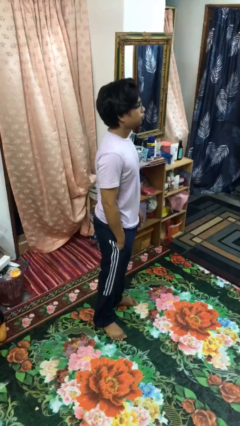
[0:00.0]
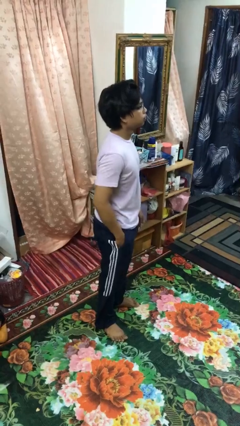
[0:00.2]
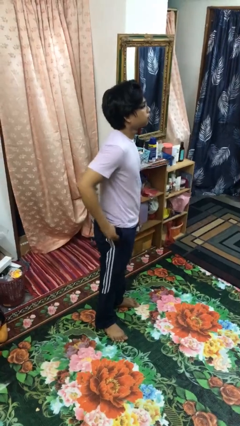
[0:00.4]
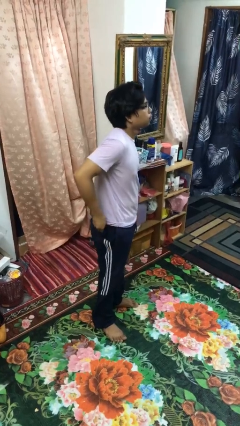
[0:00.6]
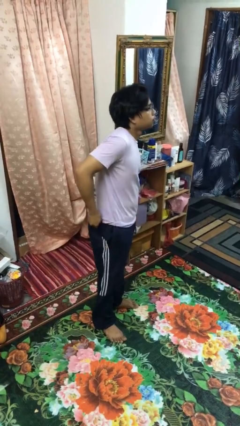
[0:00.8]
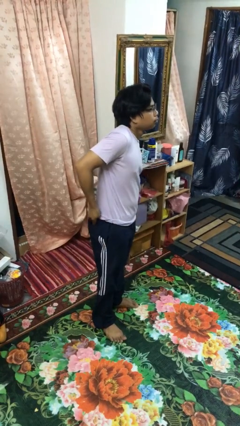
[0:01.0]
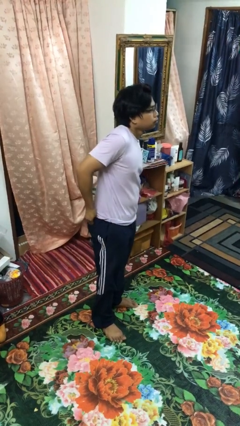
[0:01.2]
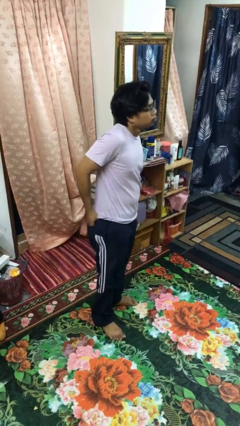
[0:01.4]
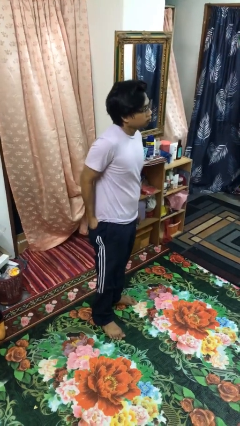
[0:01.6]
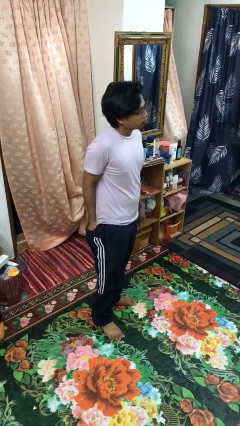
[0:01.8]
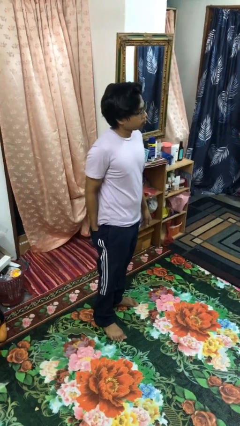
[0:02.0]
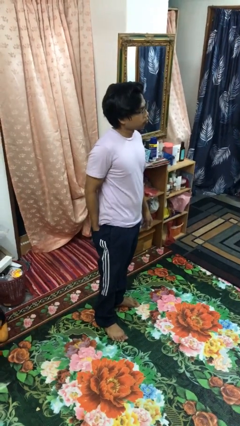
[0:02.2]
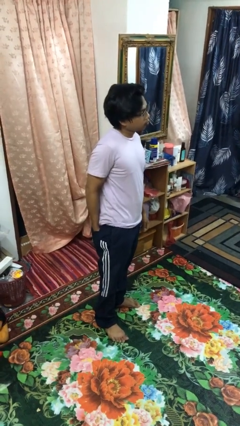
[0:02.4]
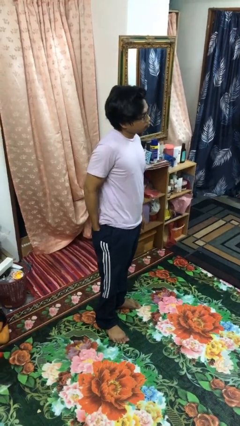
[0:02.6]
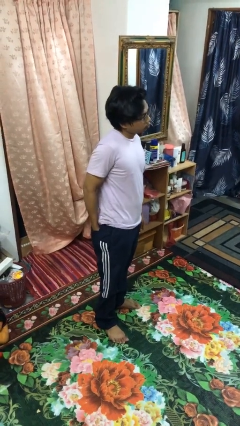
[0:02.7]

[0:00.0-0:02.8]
person puts hands in back pockets

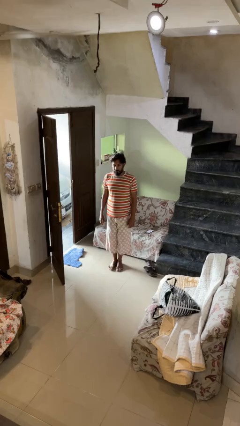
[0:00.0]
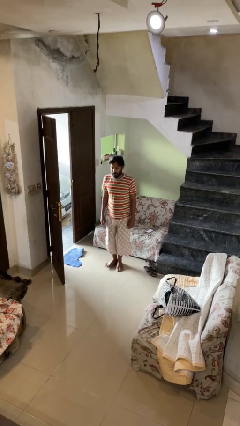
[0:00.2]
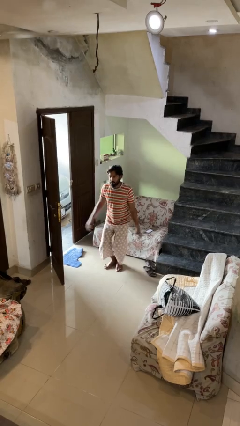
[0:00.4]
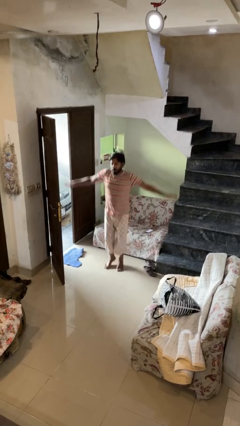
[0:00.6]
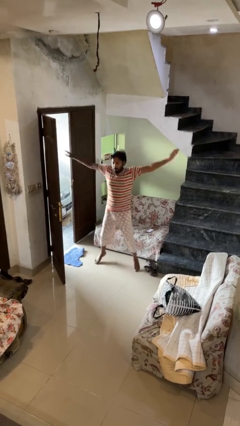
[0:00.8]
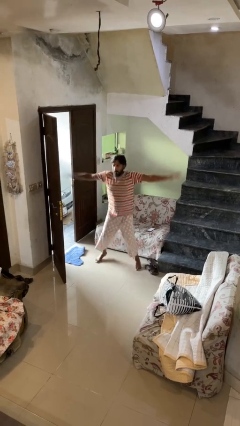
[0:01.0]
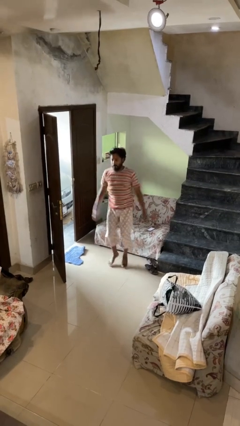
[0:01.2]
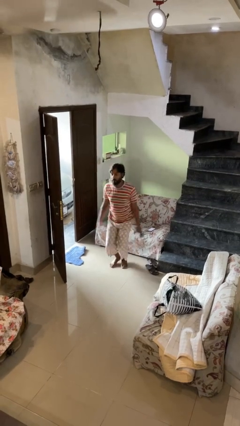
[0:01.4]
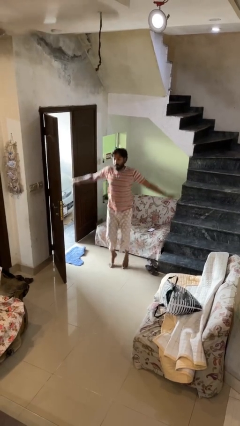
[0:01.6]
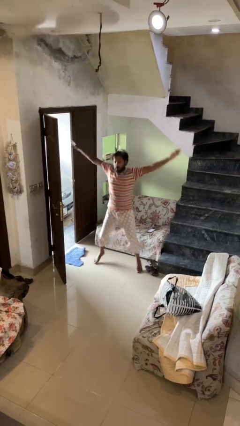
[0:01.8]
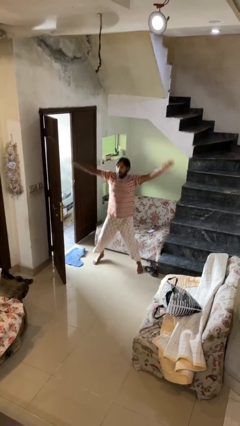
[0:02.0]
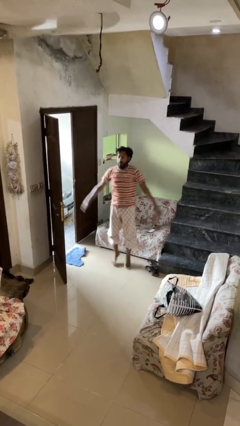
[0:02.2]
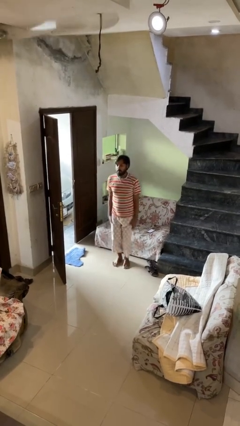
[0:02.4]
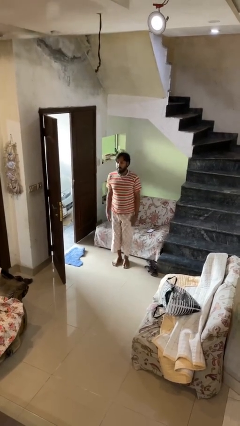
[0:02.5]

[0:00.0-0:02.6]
person exercises with jumping jacks

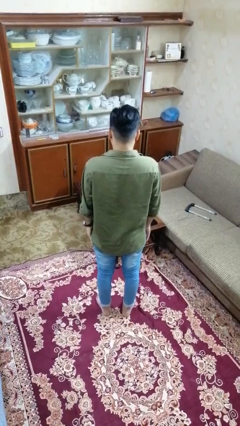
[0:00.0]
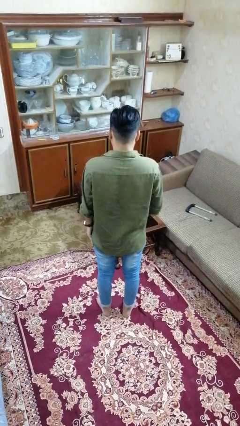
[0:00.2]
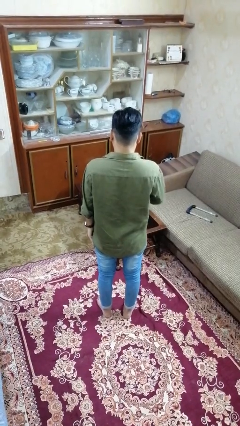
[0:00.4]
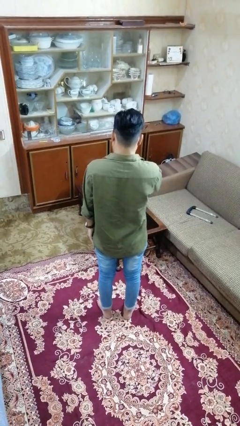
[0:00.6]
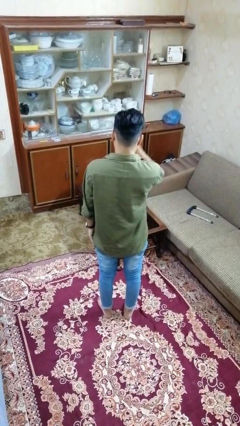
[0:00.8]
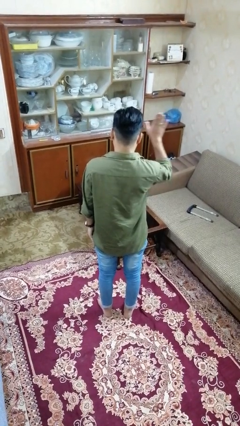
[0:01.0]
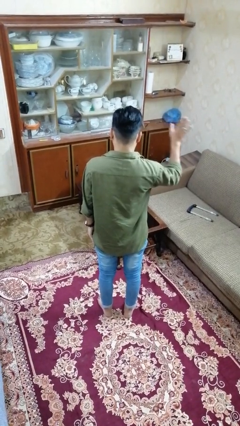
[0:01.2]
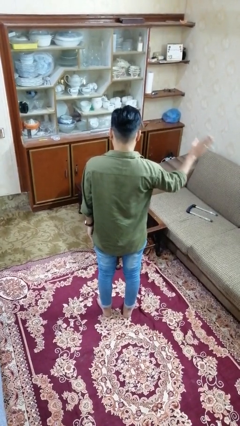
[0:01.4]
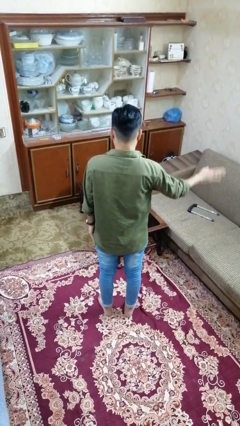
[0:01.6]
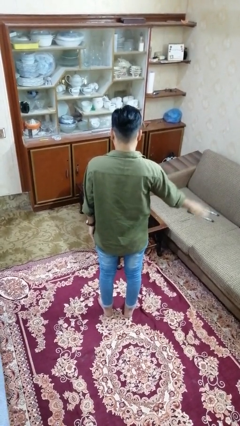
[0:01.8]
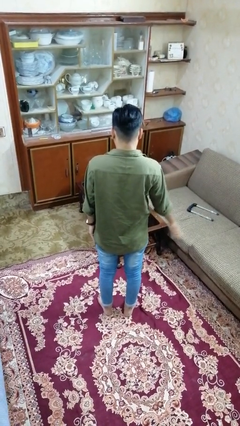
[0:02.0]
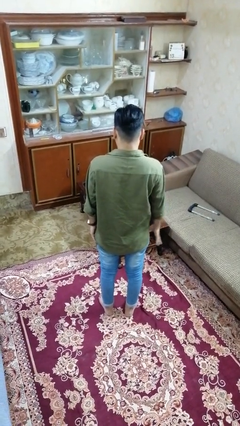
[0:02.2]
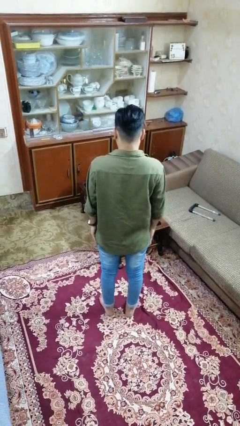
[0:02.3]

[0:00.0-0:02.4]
person gestures swipe right

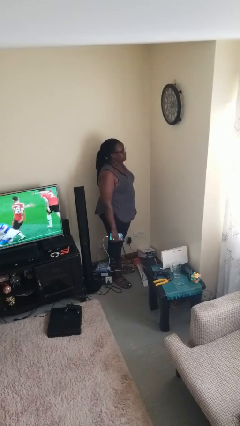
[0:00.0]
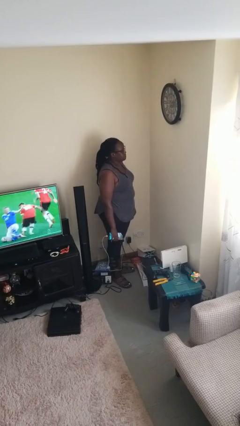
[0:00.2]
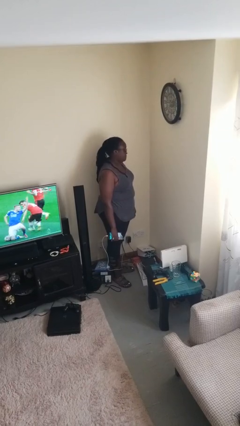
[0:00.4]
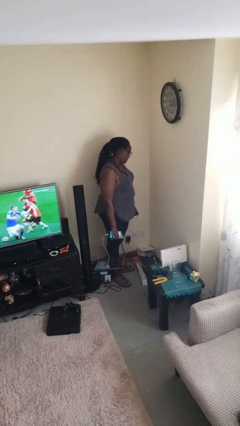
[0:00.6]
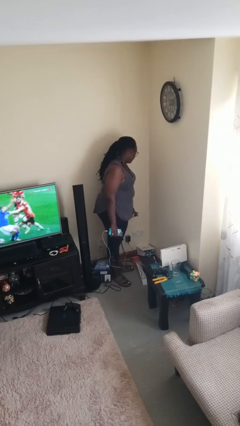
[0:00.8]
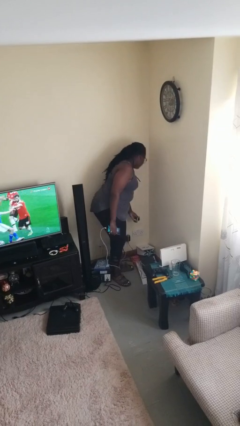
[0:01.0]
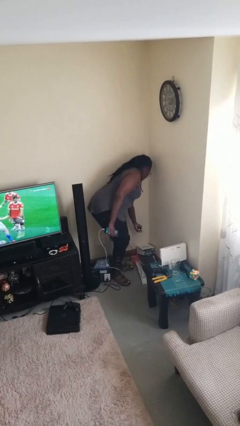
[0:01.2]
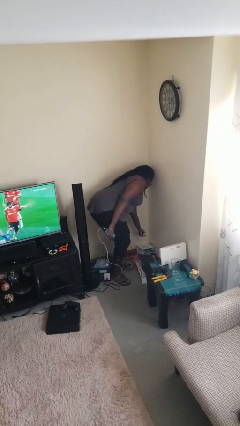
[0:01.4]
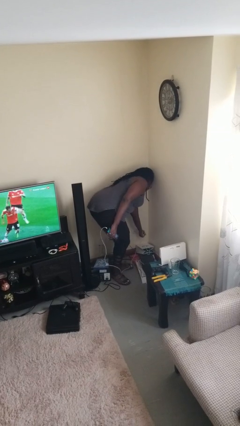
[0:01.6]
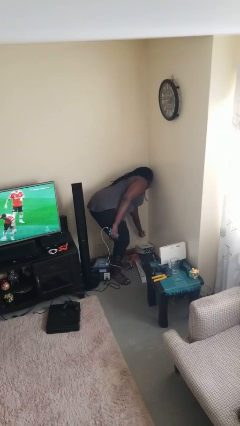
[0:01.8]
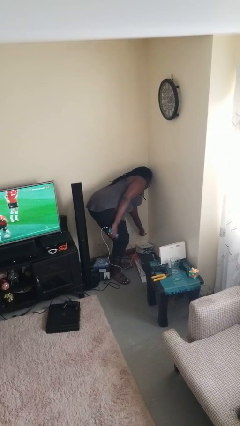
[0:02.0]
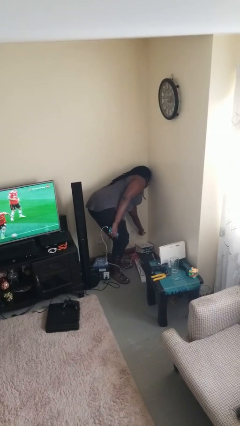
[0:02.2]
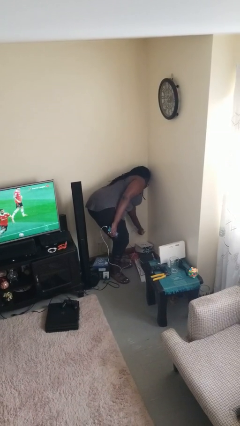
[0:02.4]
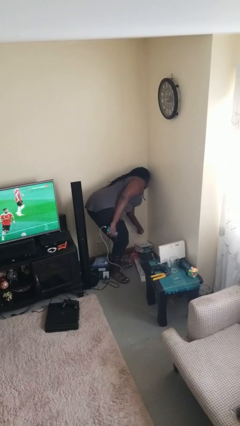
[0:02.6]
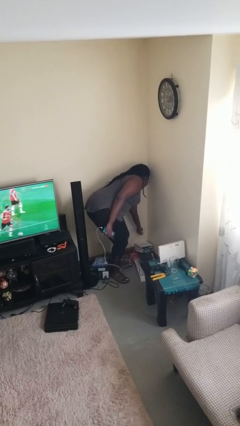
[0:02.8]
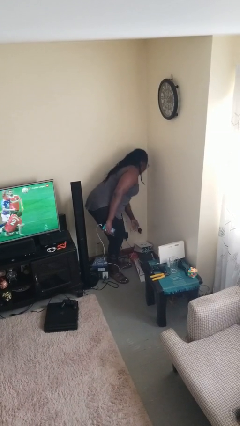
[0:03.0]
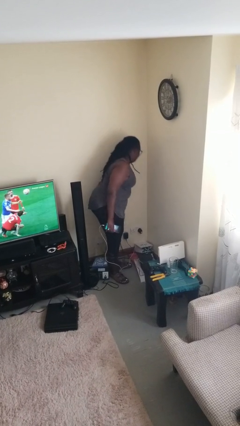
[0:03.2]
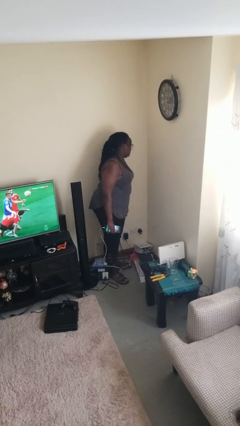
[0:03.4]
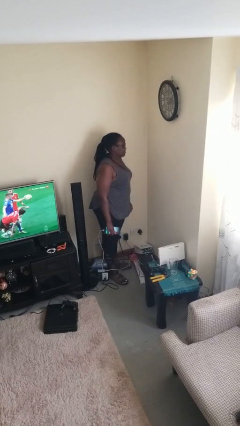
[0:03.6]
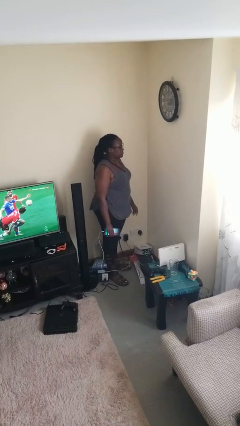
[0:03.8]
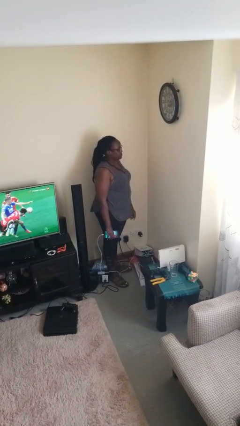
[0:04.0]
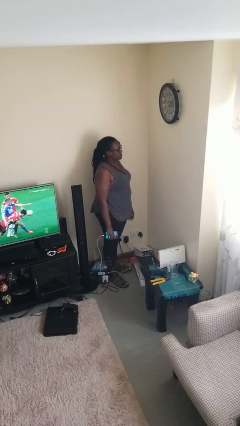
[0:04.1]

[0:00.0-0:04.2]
person plugs into electrical socket

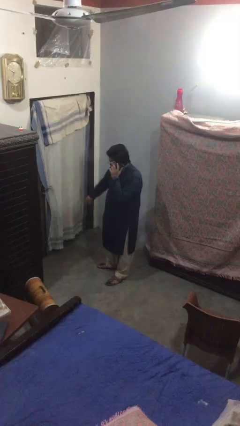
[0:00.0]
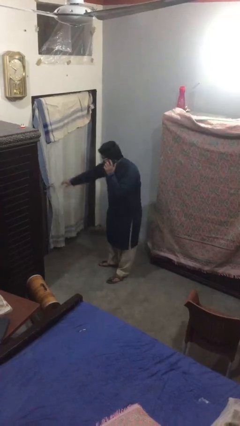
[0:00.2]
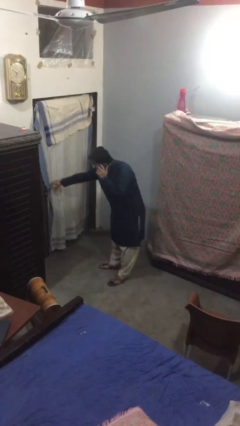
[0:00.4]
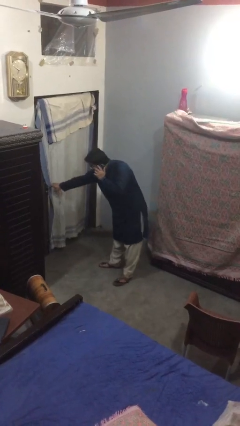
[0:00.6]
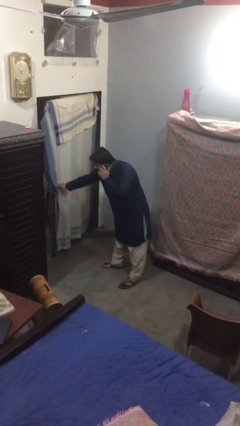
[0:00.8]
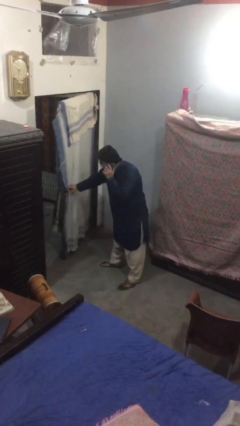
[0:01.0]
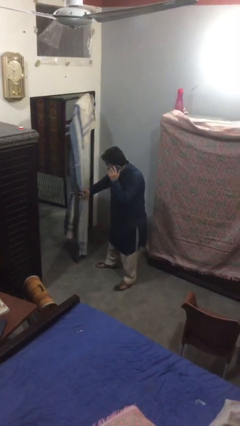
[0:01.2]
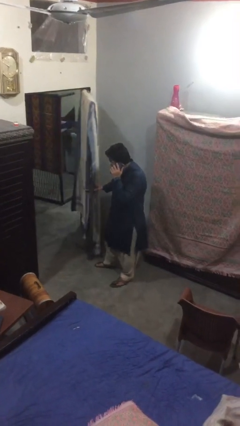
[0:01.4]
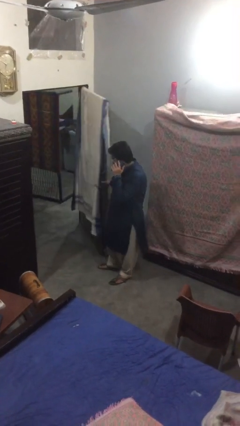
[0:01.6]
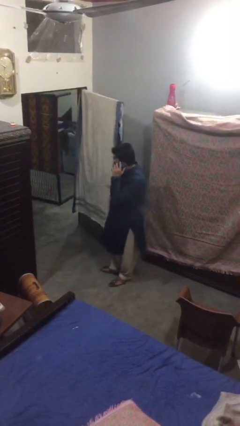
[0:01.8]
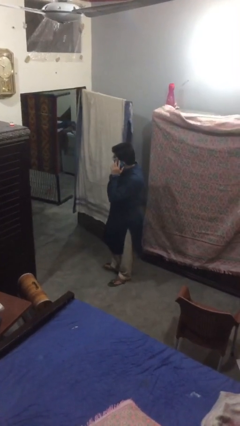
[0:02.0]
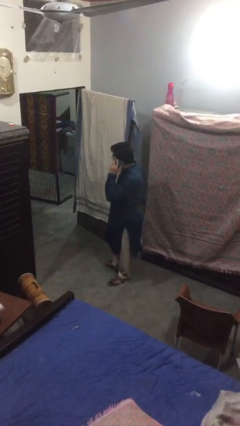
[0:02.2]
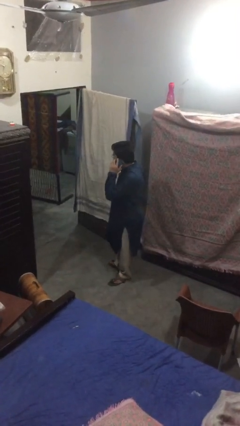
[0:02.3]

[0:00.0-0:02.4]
person opens facility door

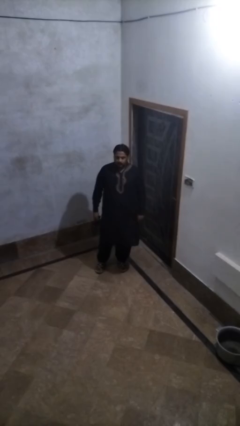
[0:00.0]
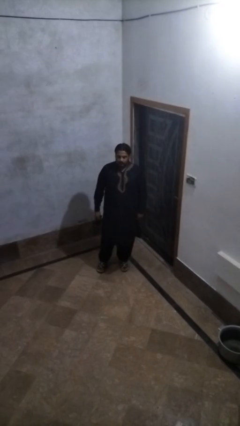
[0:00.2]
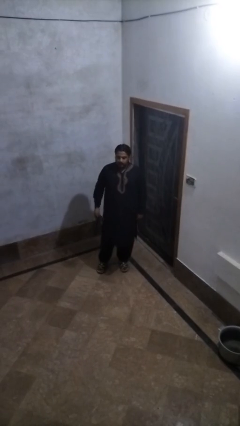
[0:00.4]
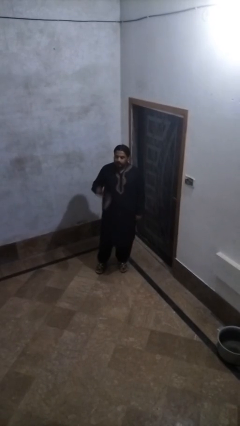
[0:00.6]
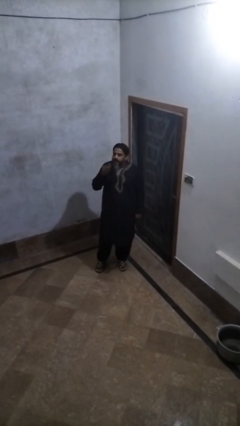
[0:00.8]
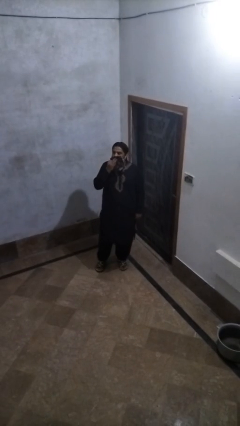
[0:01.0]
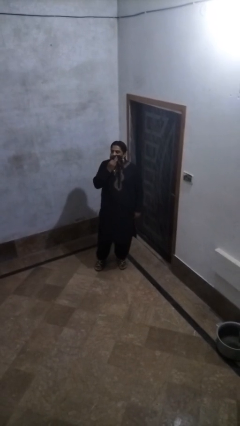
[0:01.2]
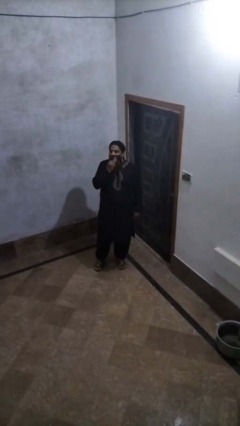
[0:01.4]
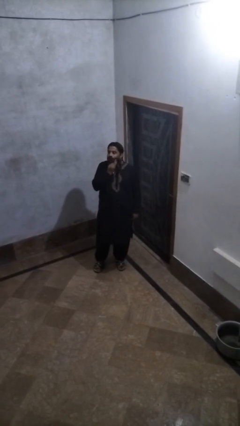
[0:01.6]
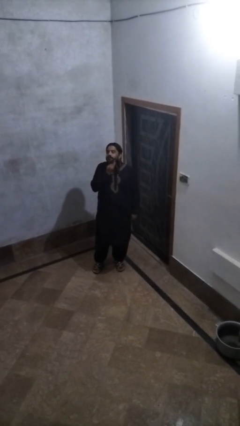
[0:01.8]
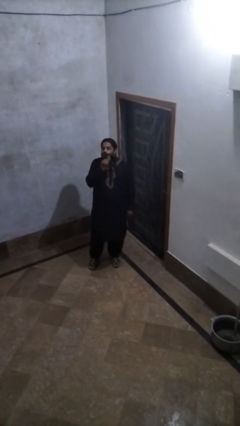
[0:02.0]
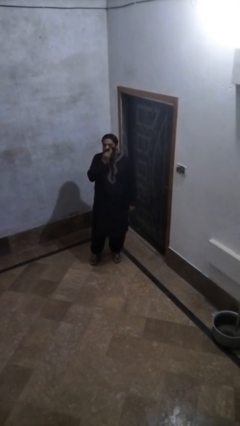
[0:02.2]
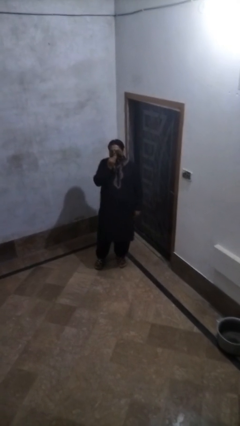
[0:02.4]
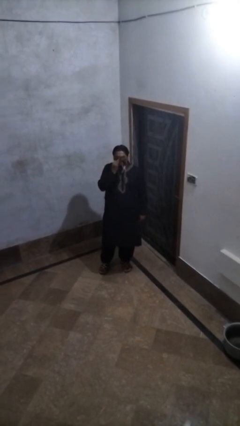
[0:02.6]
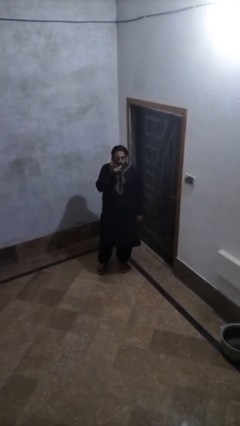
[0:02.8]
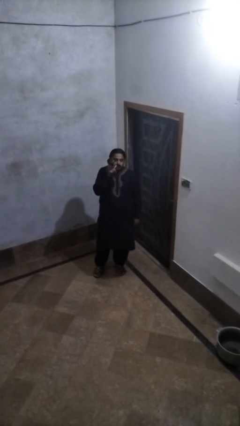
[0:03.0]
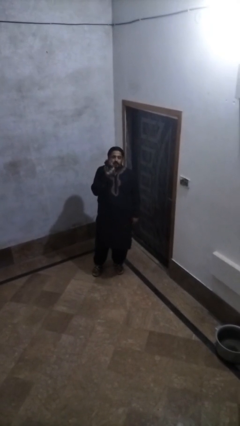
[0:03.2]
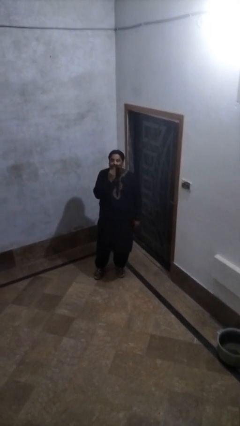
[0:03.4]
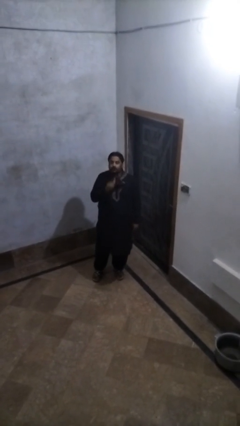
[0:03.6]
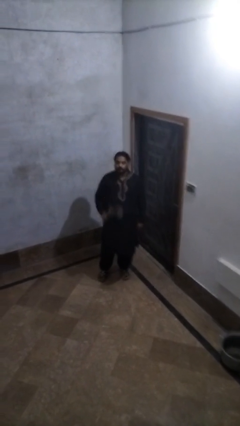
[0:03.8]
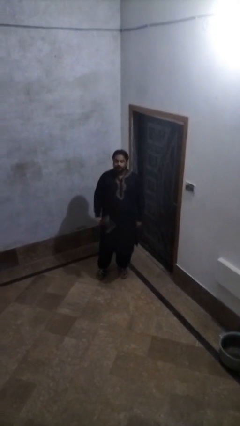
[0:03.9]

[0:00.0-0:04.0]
person wipes mouth with napkin
